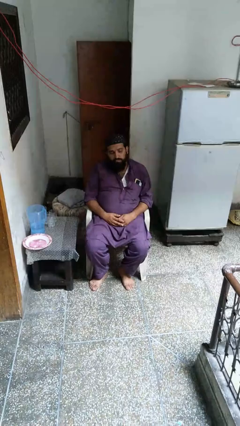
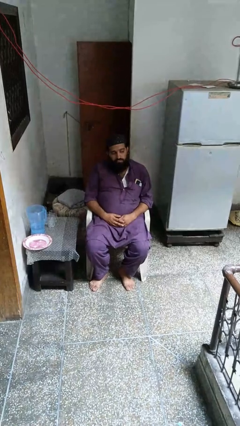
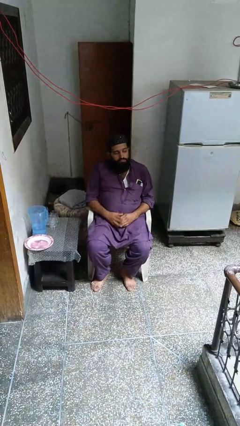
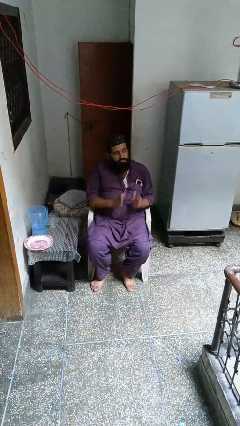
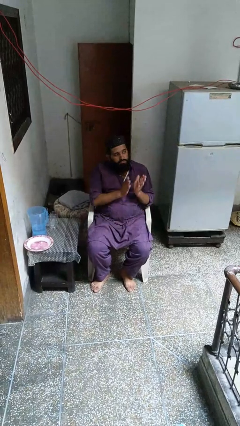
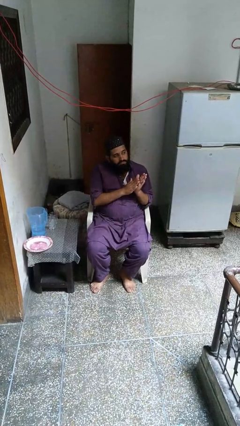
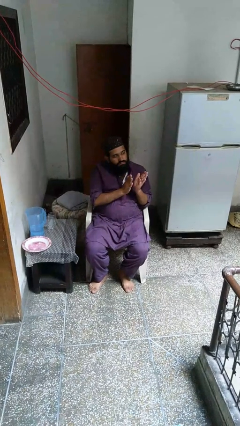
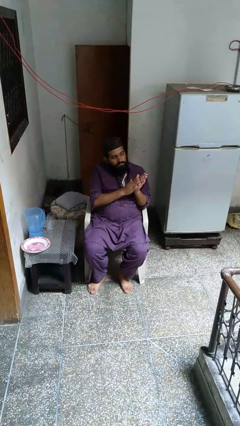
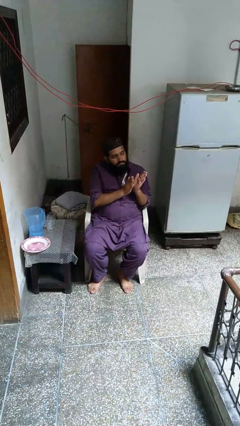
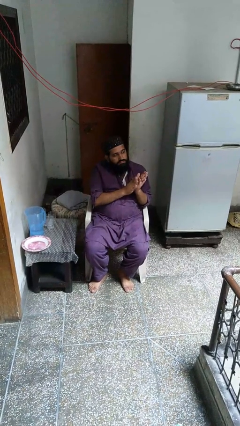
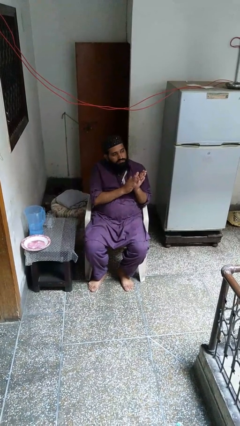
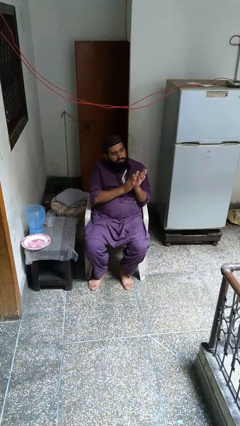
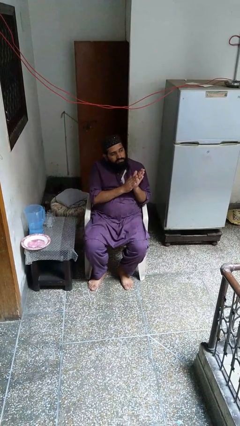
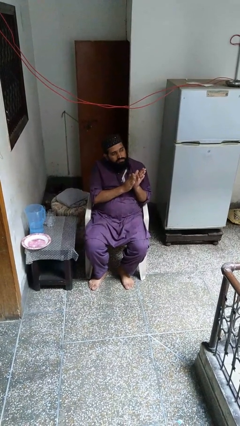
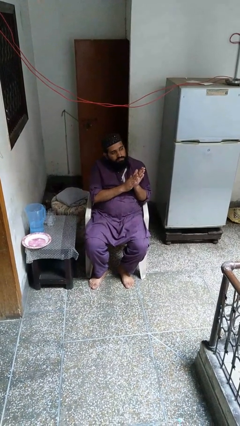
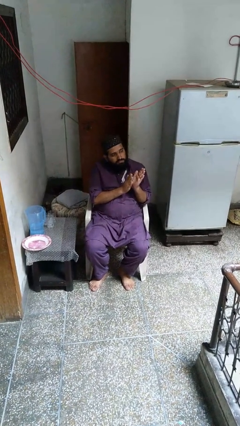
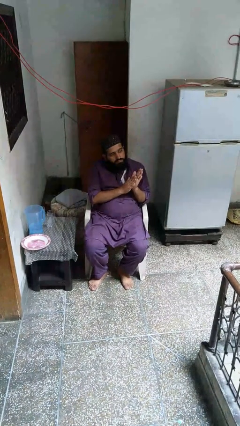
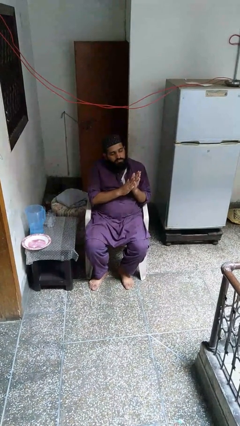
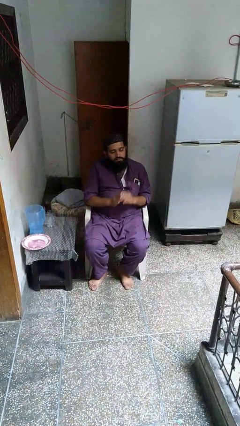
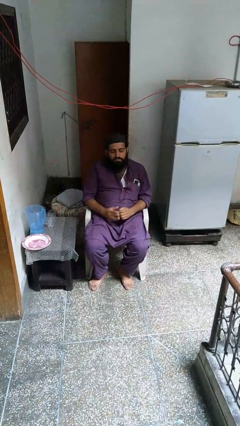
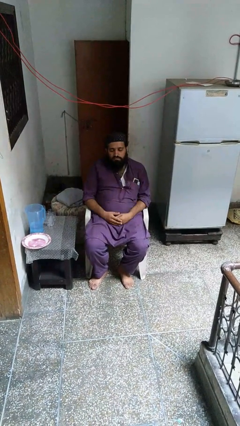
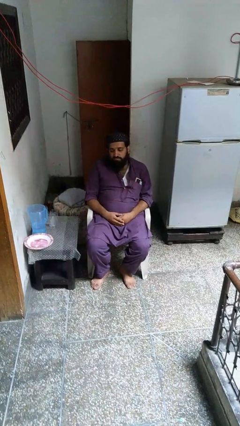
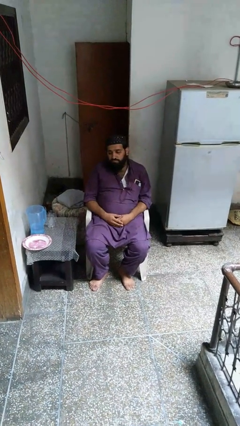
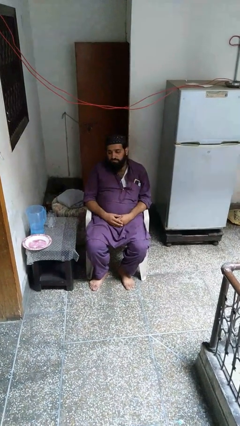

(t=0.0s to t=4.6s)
person claps hands

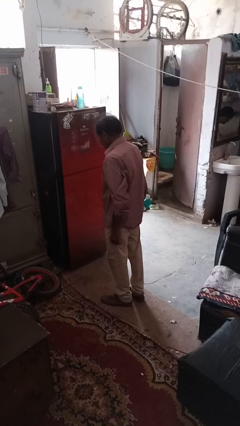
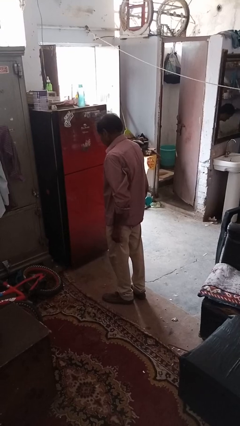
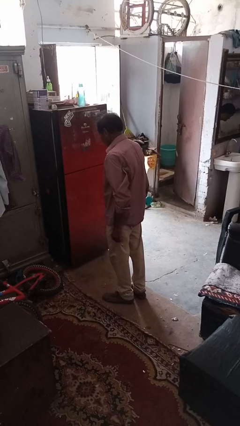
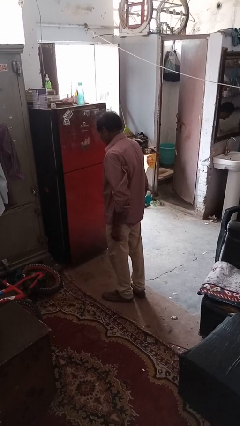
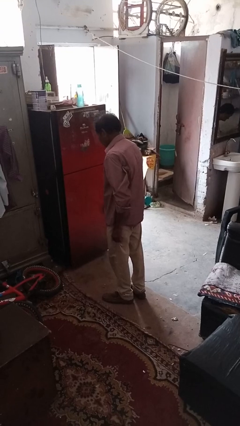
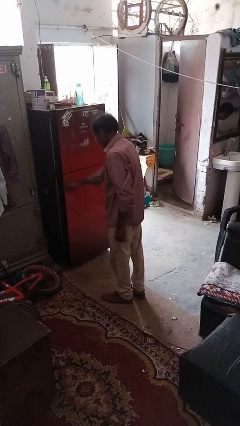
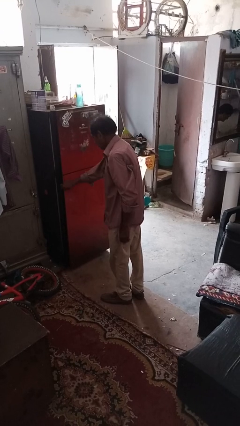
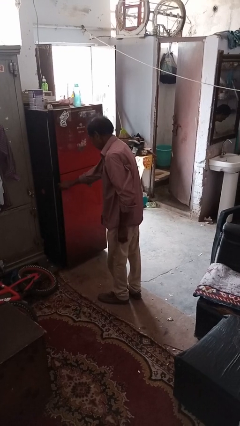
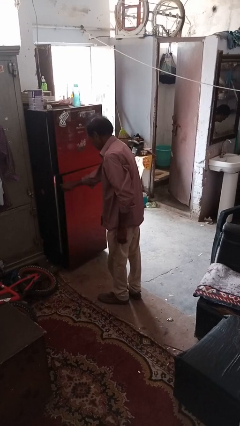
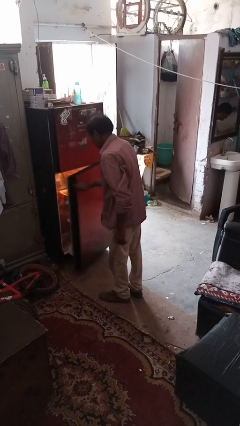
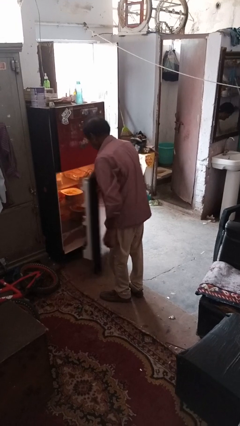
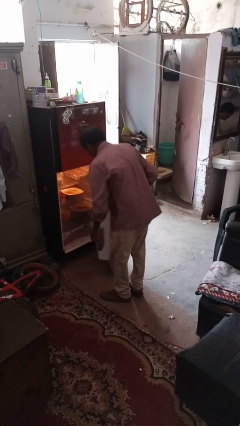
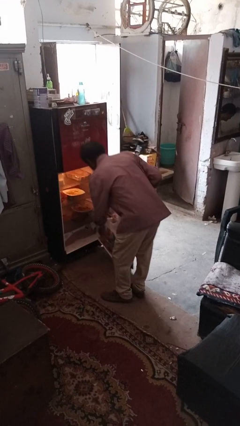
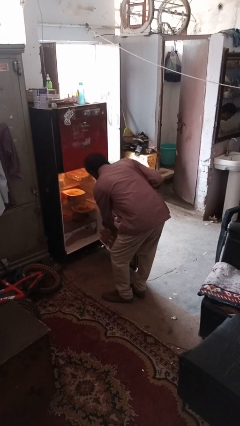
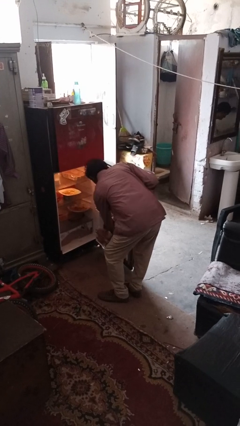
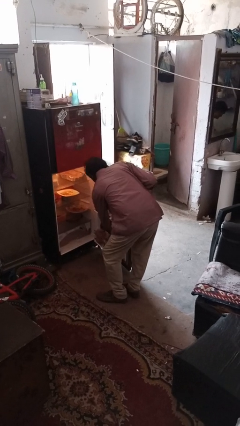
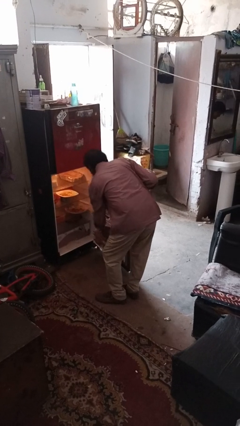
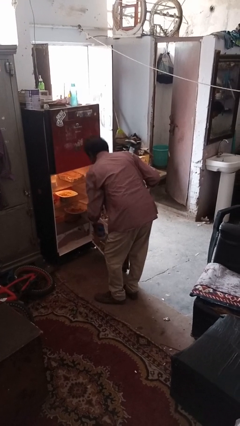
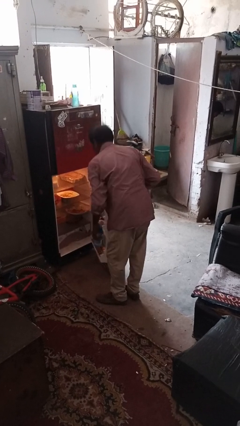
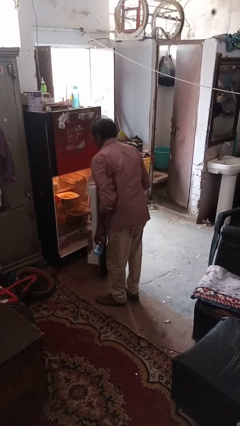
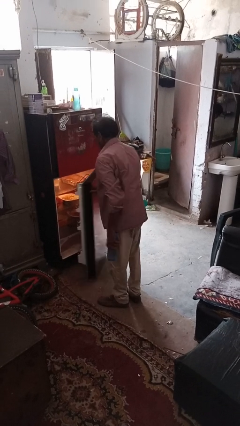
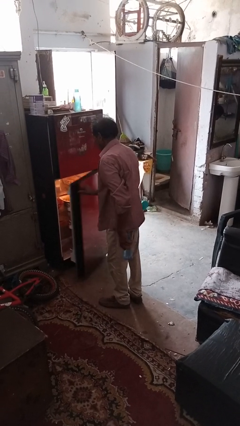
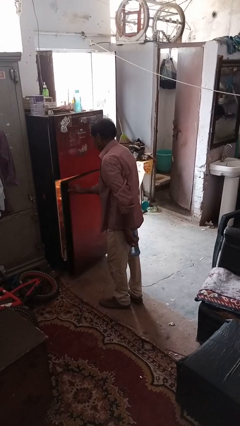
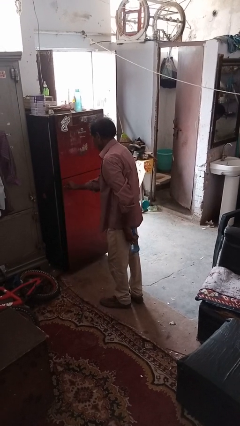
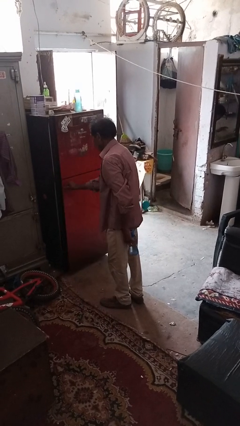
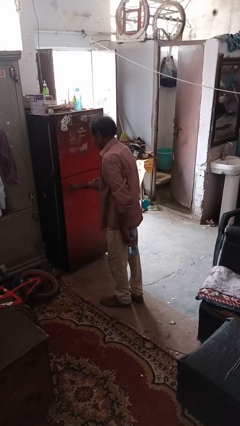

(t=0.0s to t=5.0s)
person takes object from refrigerator

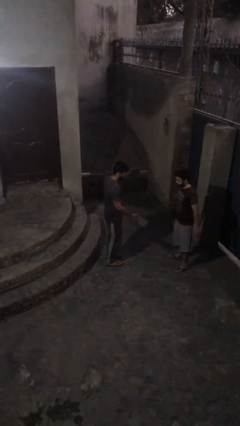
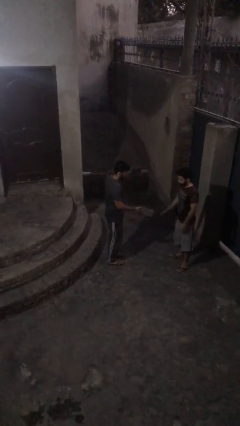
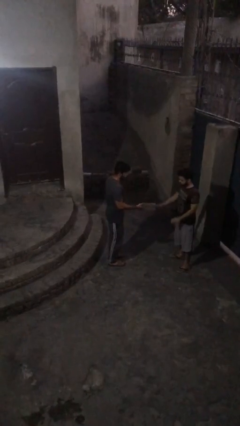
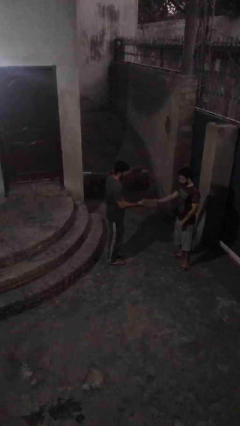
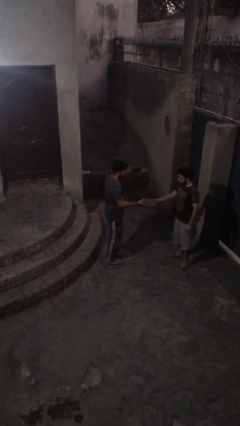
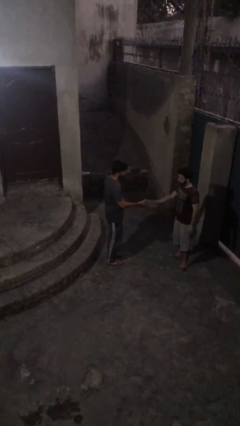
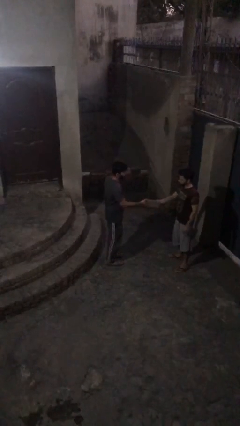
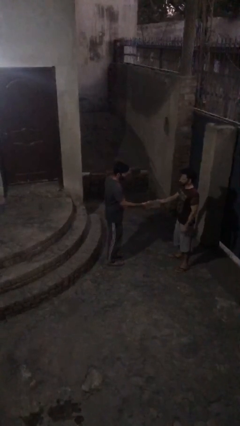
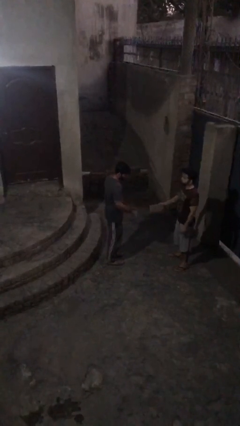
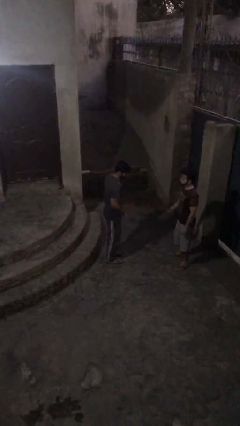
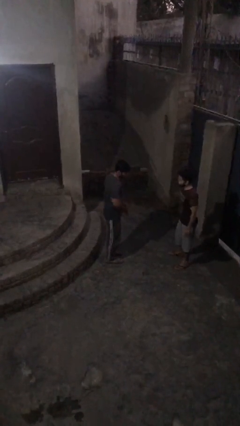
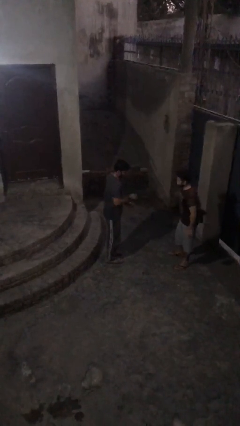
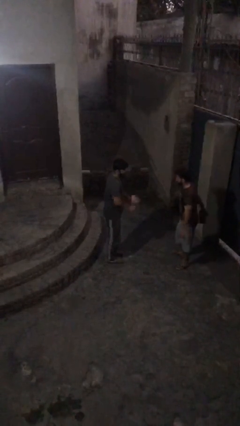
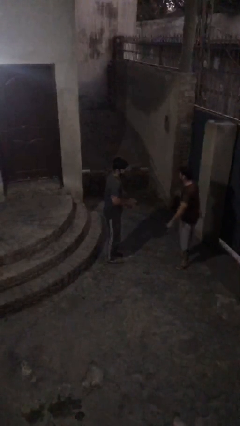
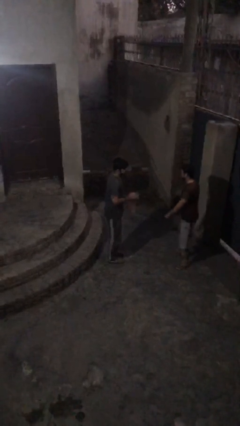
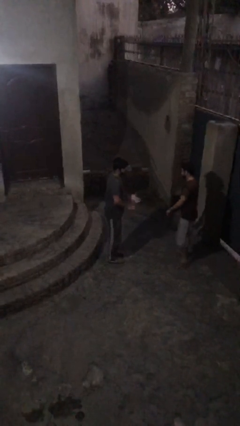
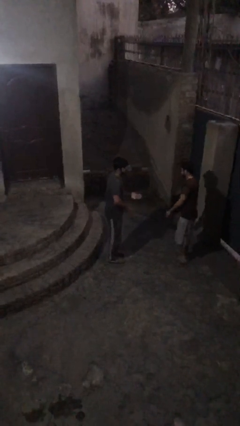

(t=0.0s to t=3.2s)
person transfers object to person

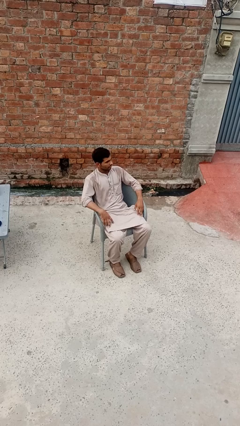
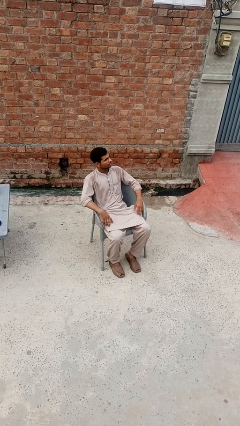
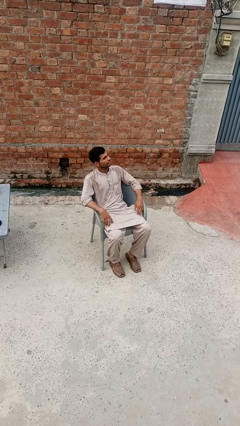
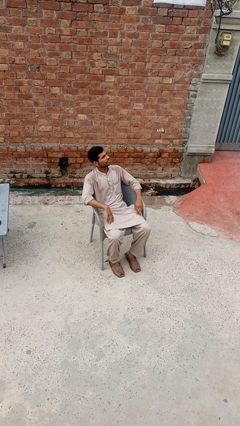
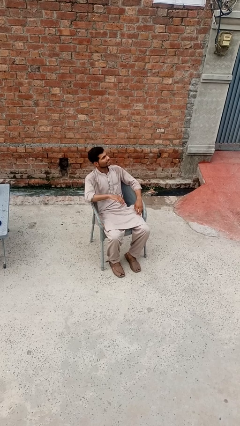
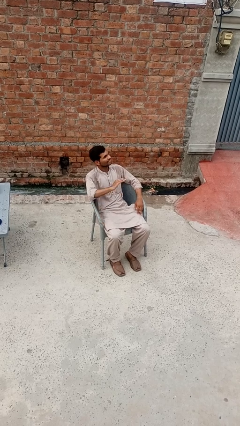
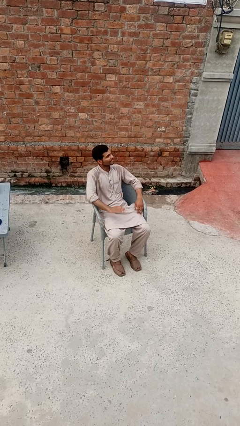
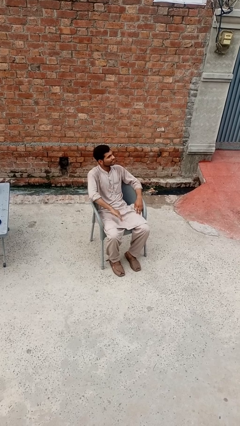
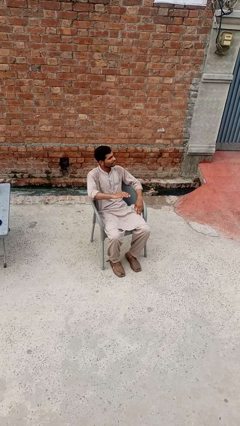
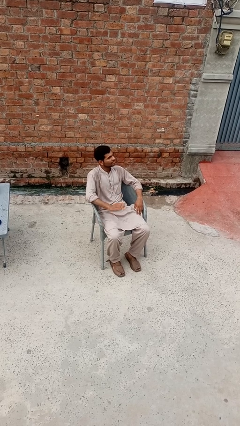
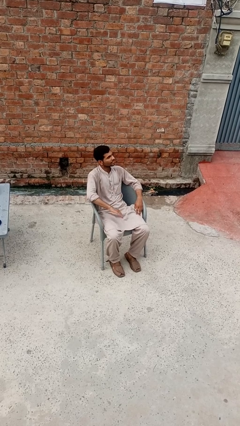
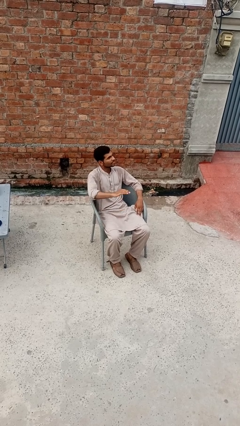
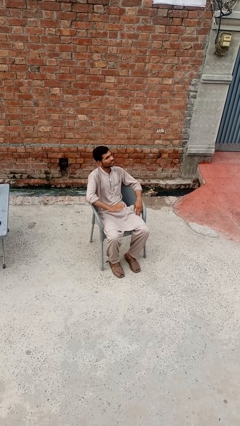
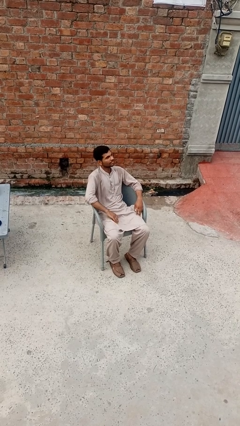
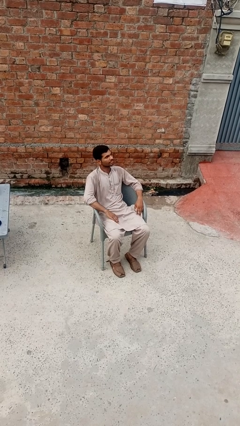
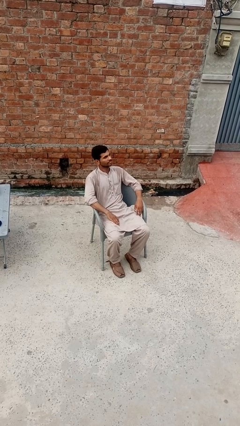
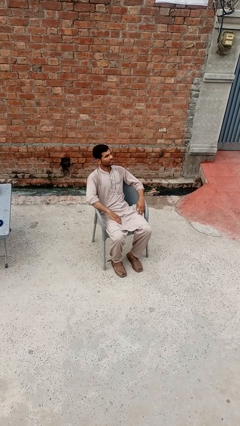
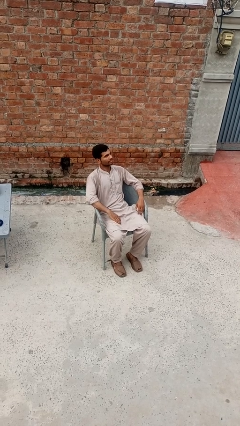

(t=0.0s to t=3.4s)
person slaps hands on thighs

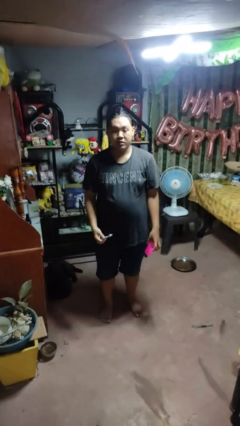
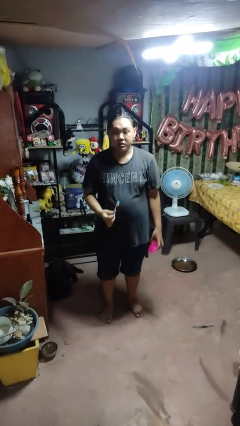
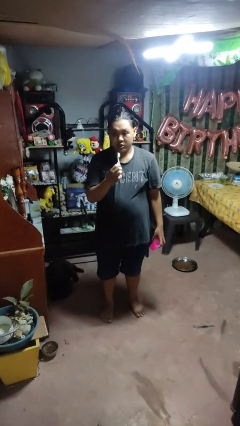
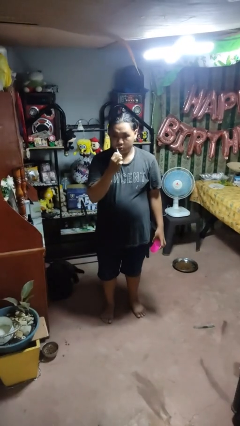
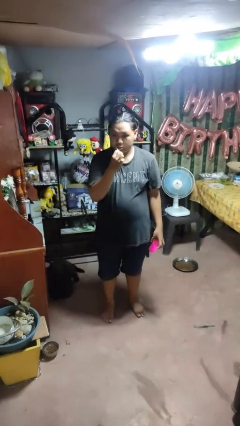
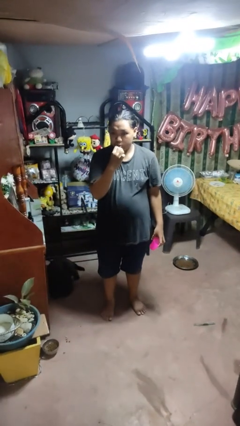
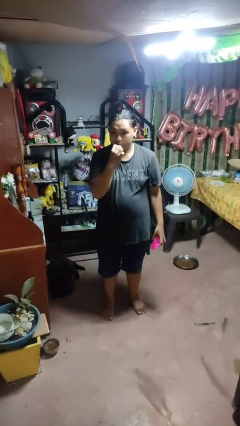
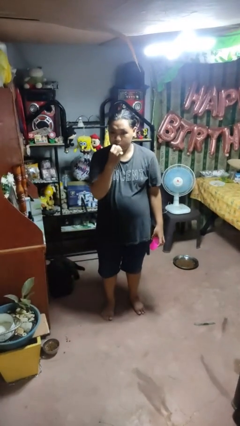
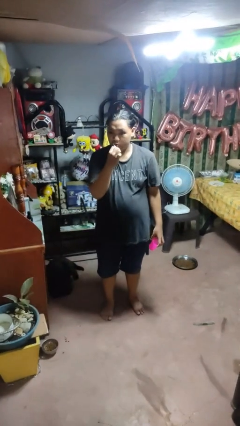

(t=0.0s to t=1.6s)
person brushes teeth
